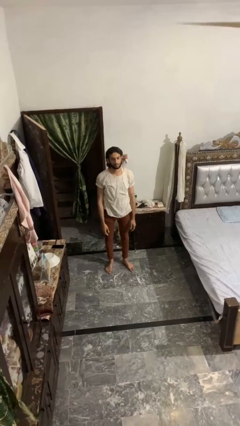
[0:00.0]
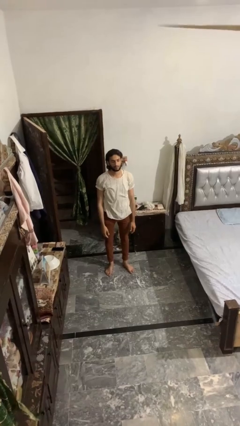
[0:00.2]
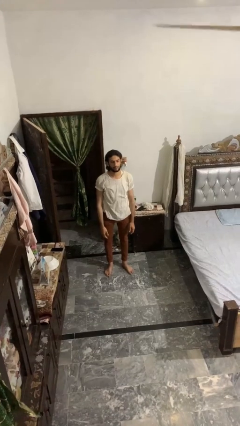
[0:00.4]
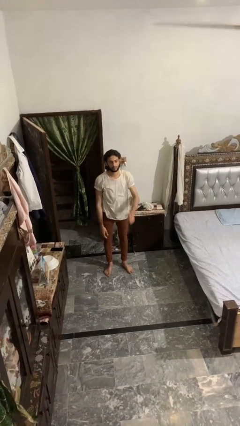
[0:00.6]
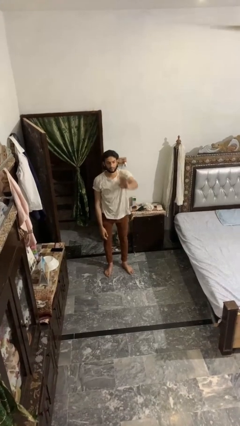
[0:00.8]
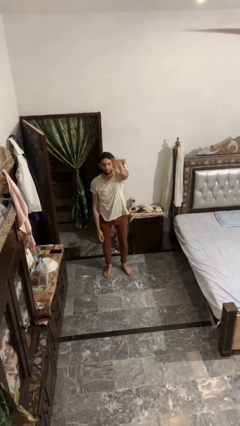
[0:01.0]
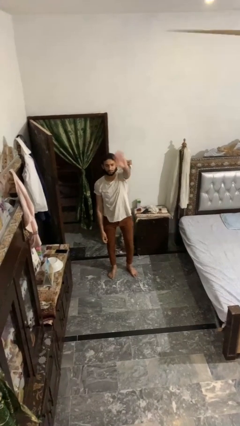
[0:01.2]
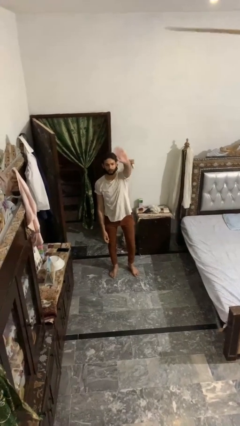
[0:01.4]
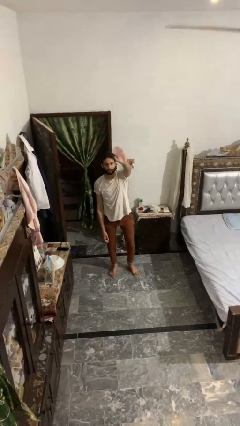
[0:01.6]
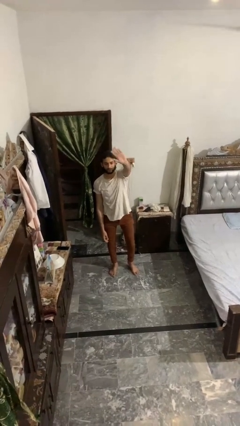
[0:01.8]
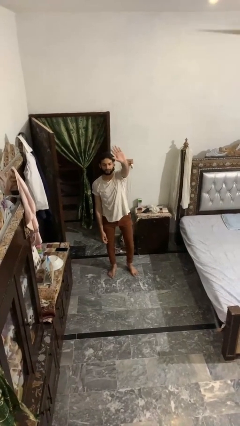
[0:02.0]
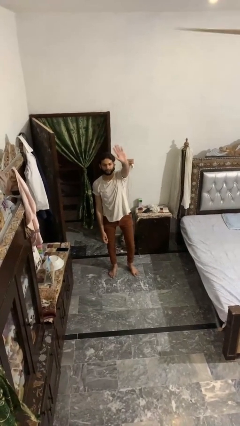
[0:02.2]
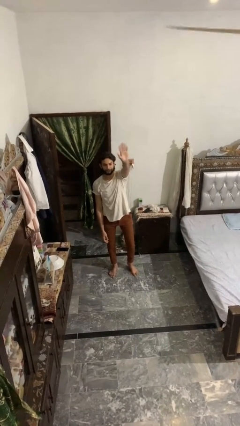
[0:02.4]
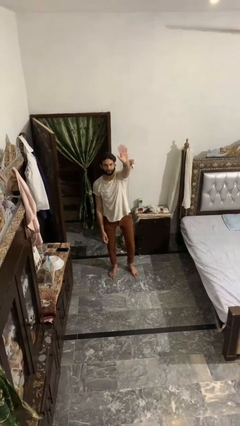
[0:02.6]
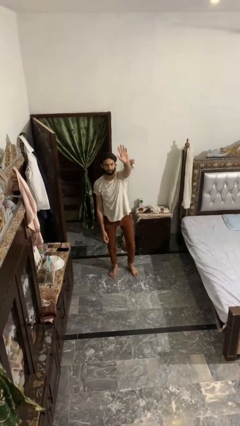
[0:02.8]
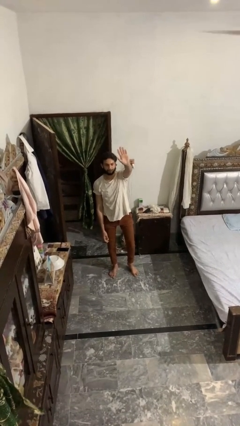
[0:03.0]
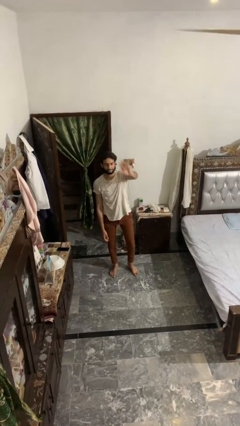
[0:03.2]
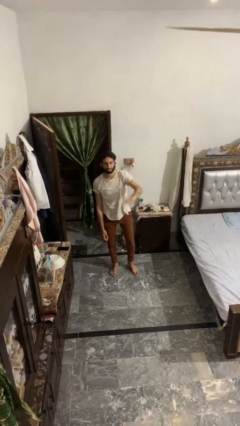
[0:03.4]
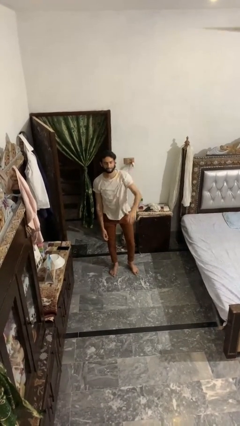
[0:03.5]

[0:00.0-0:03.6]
person waves at person

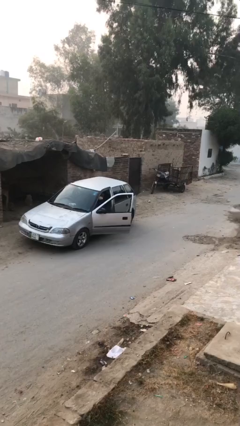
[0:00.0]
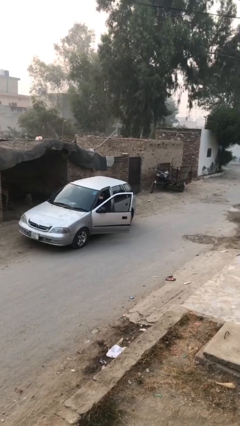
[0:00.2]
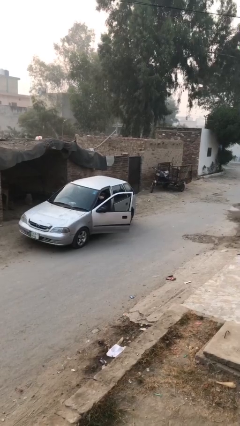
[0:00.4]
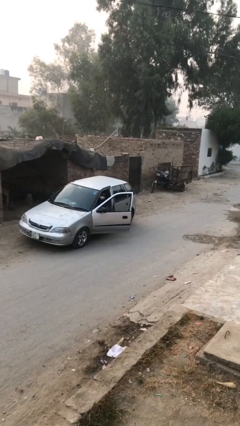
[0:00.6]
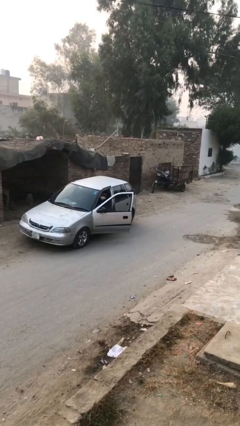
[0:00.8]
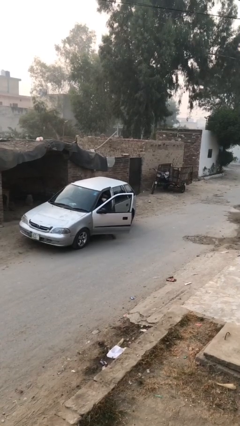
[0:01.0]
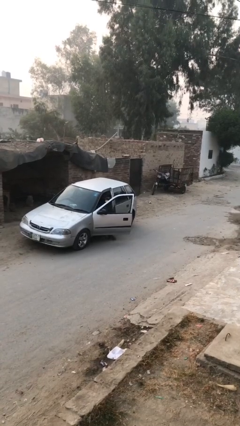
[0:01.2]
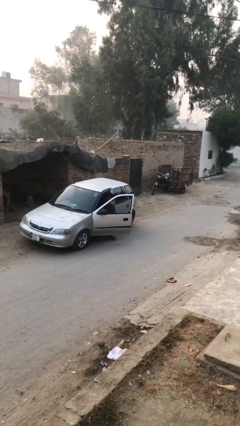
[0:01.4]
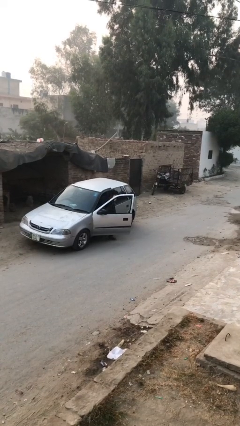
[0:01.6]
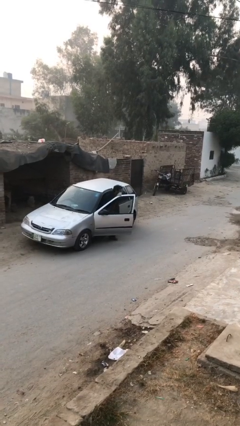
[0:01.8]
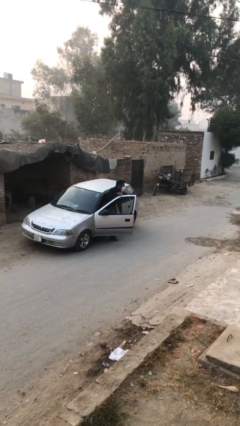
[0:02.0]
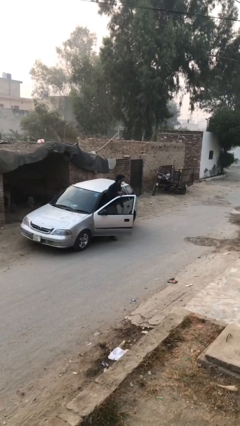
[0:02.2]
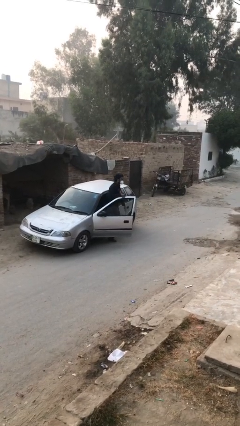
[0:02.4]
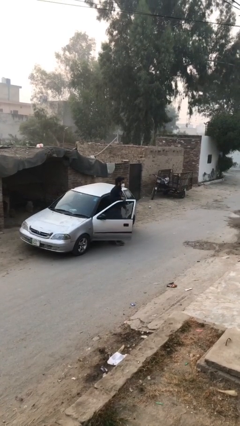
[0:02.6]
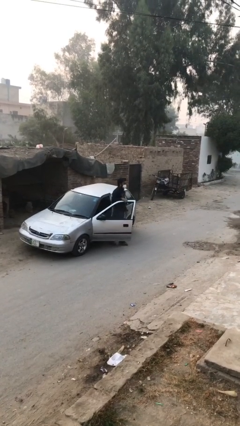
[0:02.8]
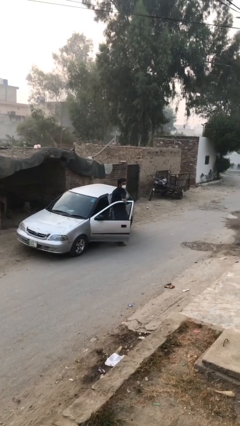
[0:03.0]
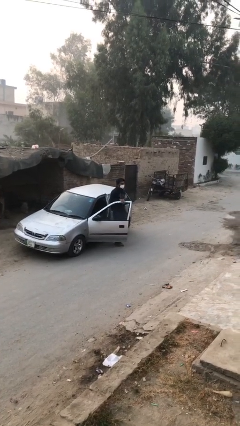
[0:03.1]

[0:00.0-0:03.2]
person exits car

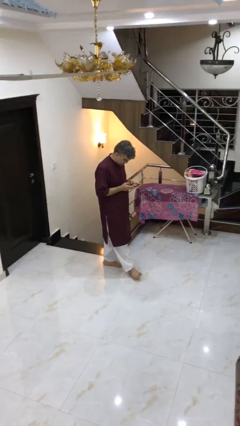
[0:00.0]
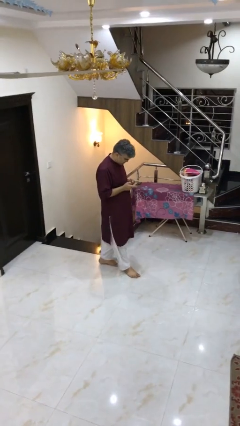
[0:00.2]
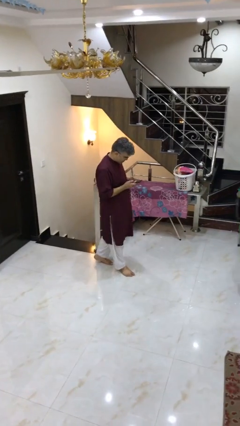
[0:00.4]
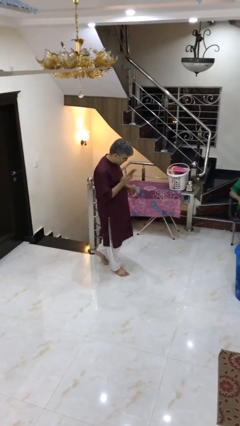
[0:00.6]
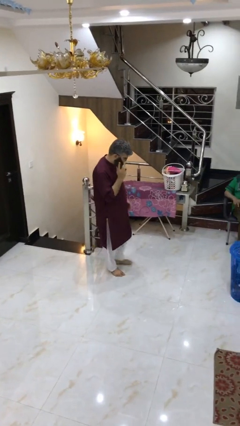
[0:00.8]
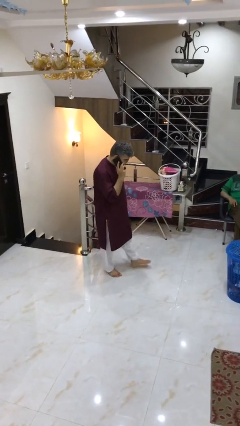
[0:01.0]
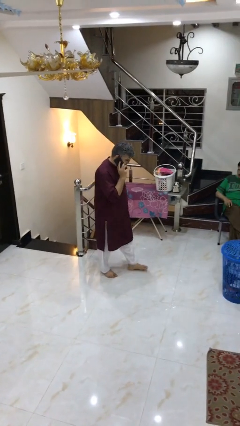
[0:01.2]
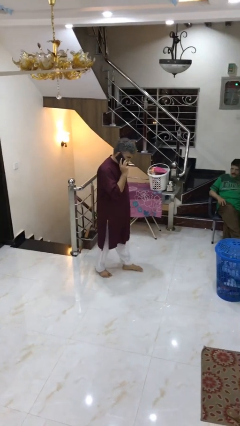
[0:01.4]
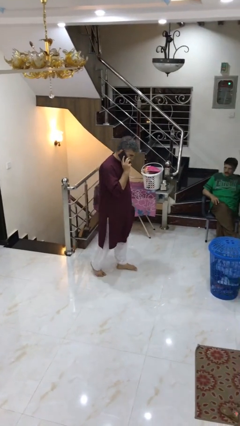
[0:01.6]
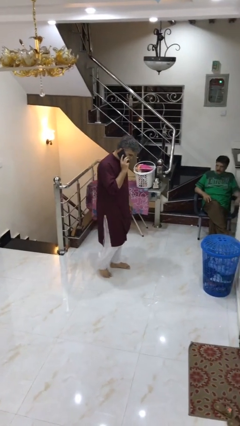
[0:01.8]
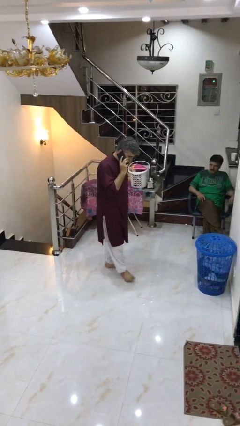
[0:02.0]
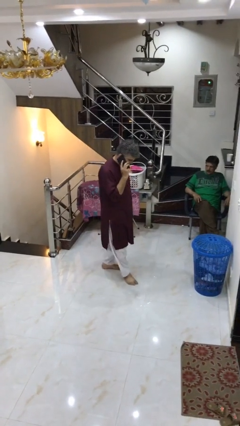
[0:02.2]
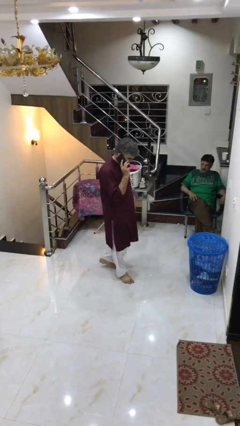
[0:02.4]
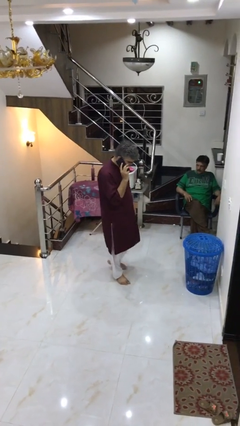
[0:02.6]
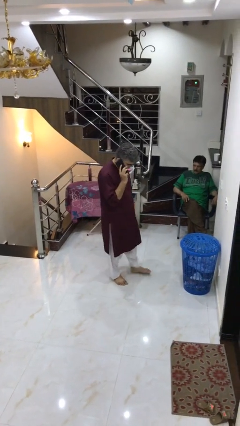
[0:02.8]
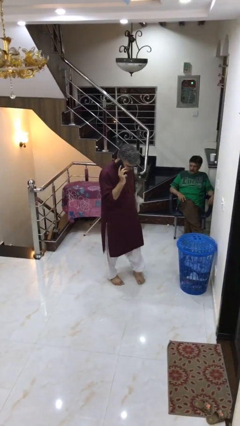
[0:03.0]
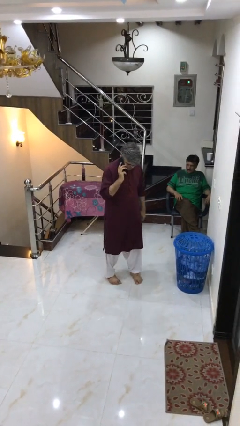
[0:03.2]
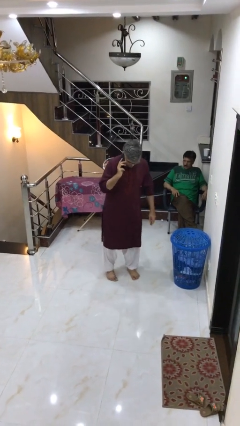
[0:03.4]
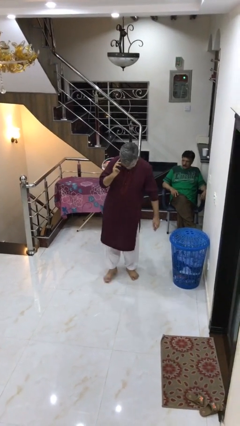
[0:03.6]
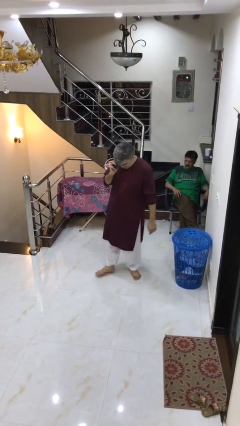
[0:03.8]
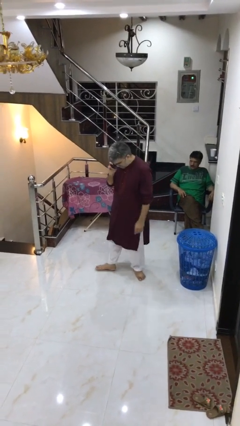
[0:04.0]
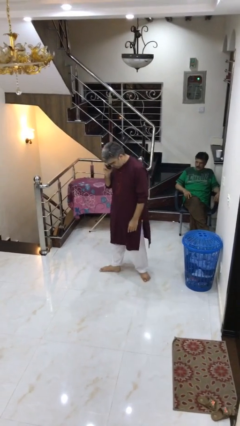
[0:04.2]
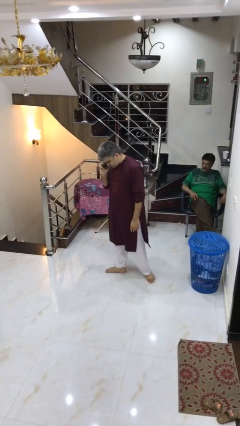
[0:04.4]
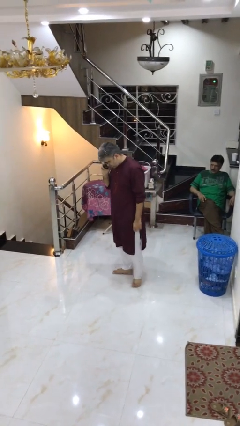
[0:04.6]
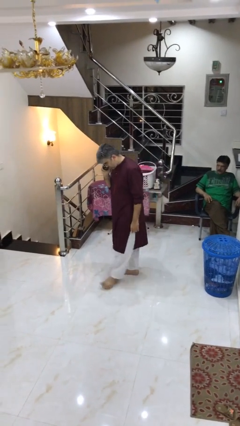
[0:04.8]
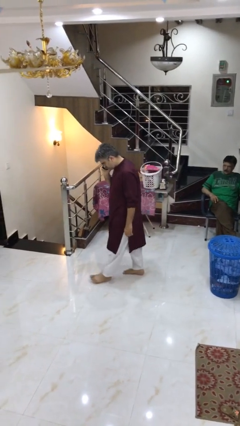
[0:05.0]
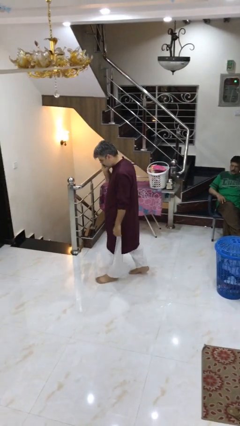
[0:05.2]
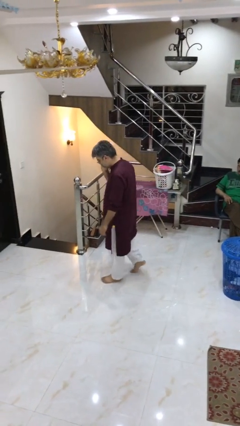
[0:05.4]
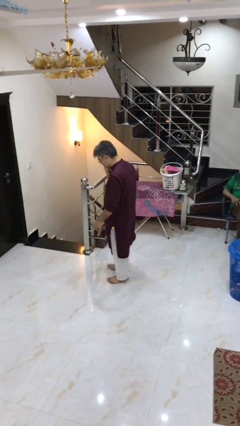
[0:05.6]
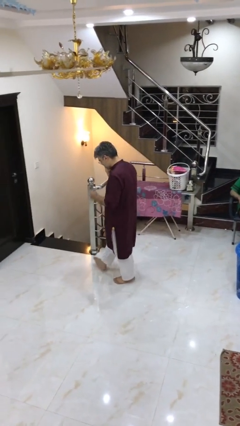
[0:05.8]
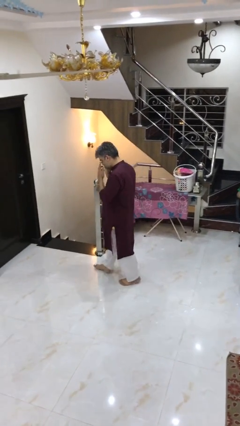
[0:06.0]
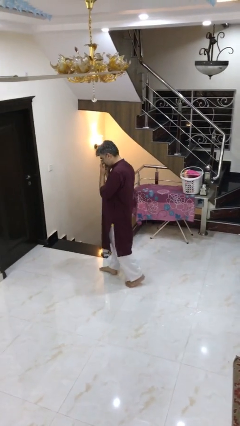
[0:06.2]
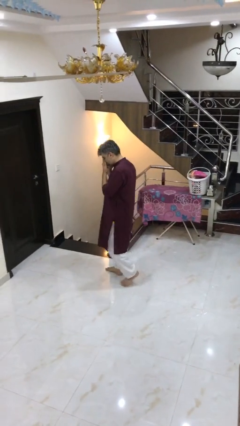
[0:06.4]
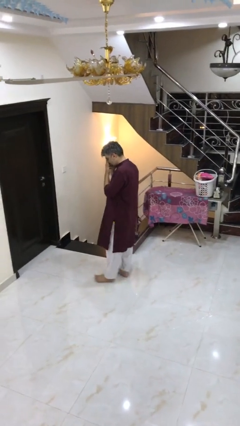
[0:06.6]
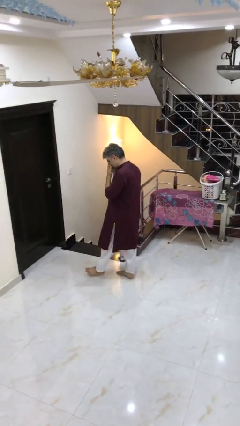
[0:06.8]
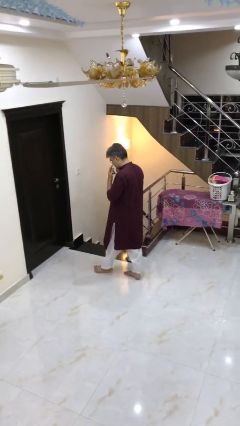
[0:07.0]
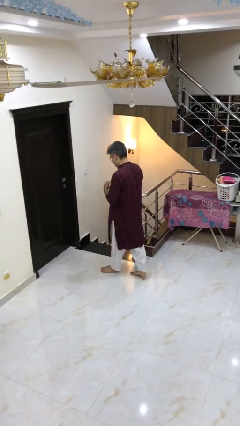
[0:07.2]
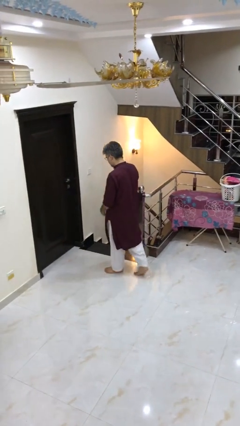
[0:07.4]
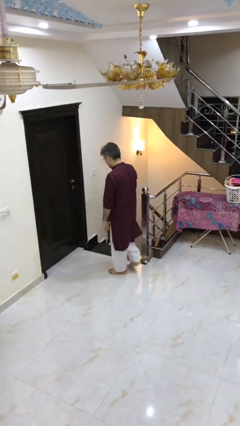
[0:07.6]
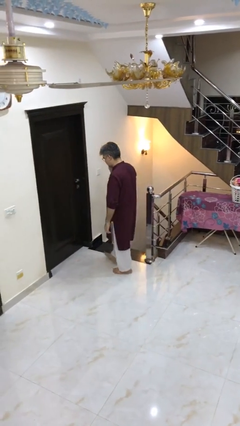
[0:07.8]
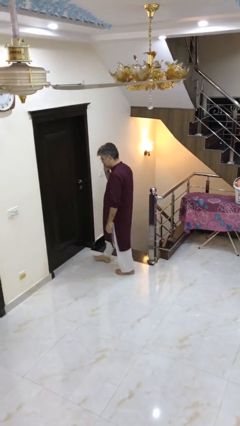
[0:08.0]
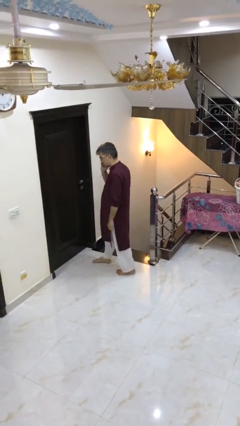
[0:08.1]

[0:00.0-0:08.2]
person talks on phone

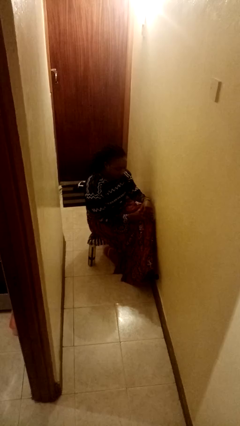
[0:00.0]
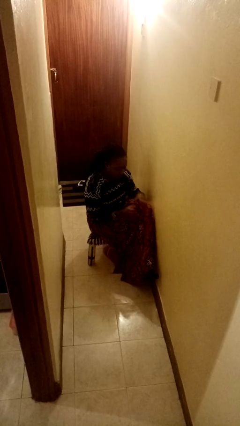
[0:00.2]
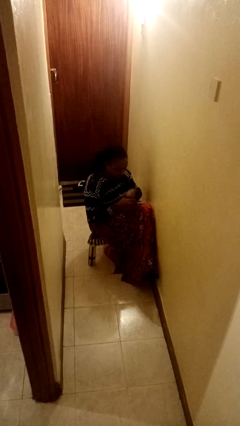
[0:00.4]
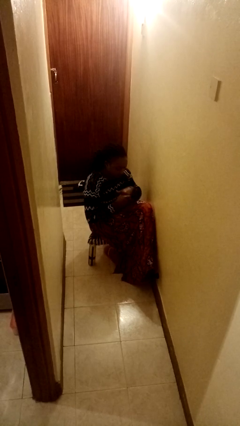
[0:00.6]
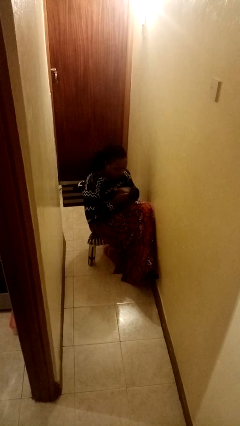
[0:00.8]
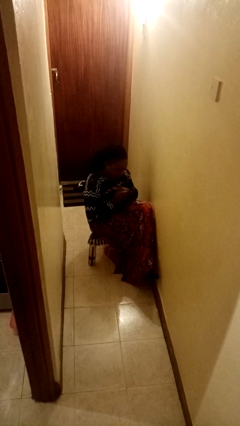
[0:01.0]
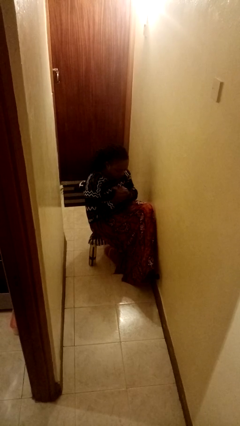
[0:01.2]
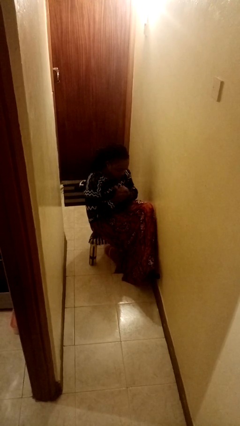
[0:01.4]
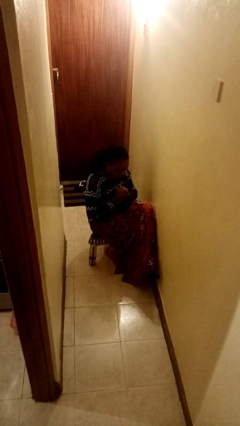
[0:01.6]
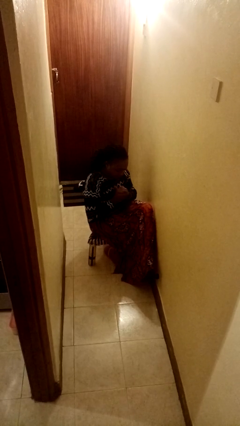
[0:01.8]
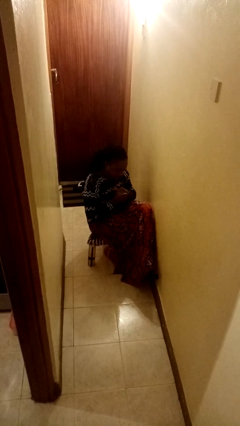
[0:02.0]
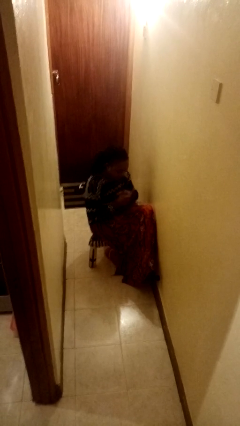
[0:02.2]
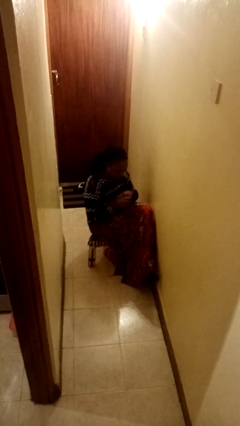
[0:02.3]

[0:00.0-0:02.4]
person cracks knuckles

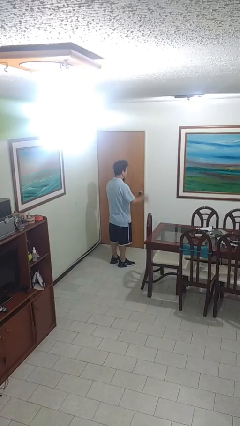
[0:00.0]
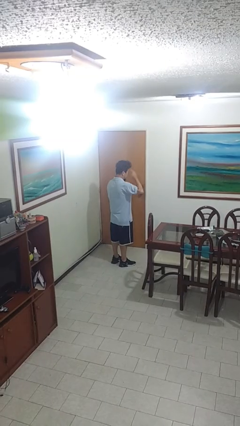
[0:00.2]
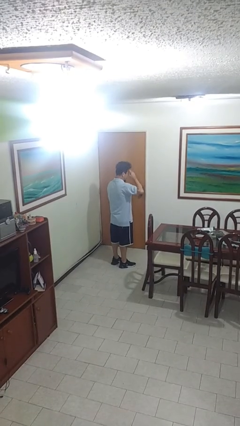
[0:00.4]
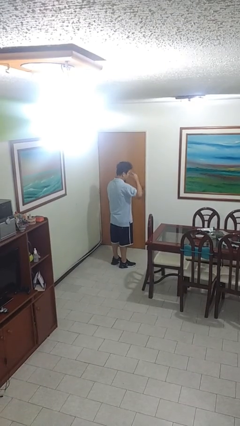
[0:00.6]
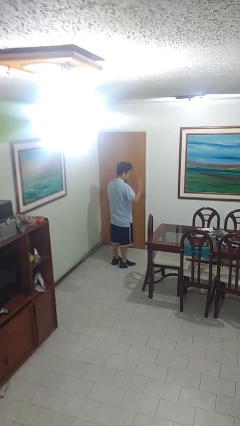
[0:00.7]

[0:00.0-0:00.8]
person salutes
